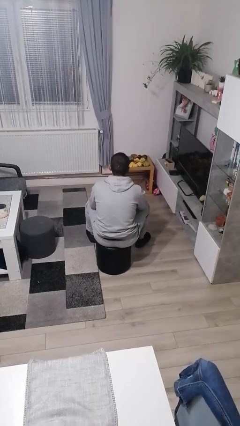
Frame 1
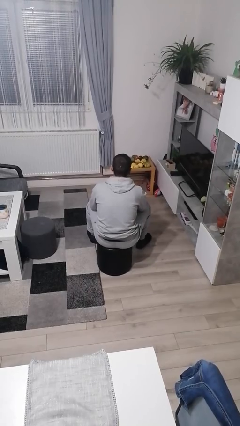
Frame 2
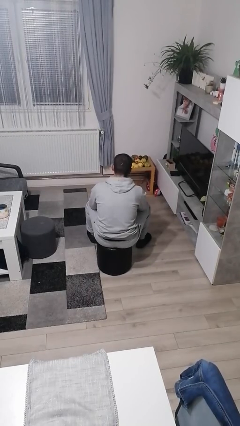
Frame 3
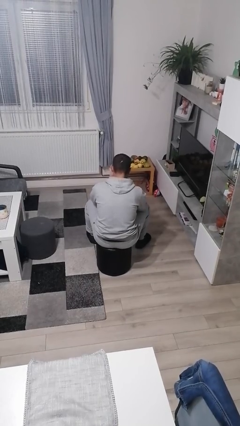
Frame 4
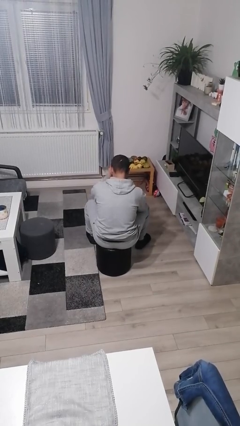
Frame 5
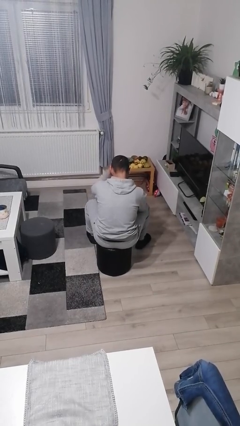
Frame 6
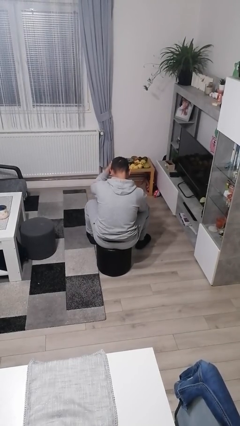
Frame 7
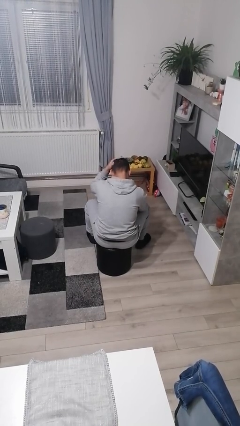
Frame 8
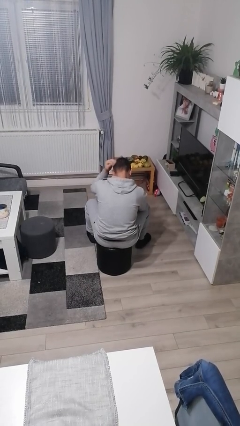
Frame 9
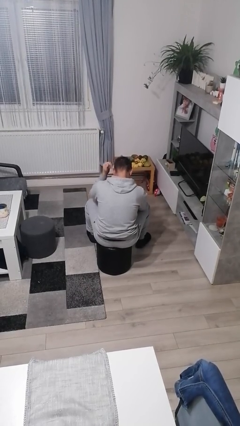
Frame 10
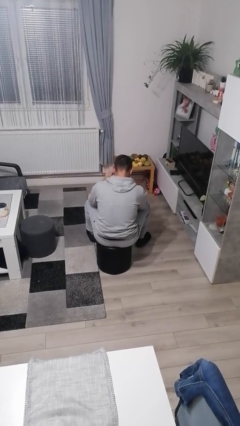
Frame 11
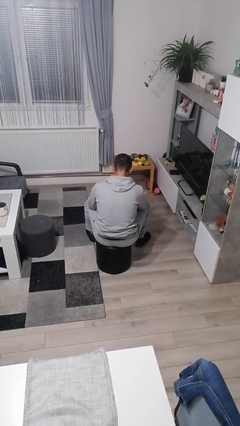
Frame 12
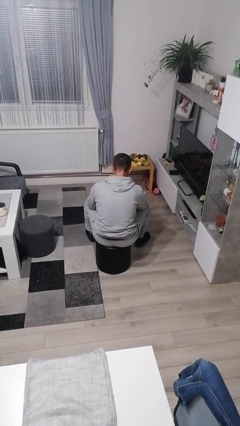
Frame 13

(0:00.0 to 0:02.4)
person strokes hair

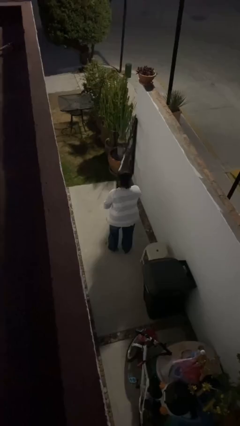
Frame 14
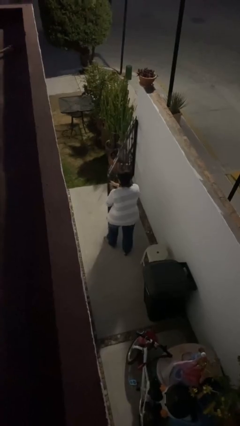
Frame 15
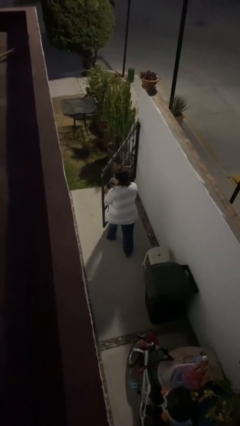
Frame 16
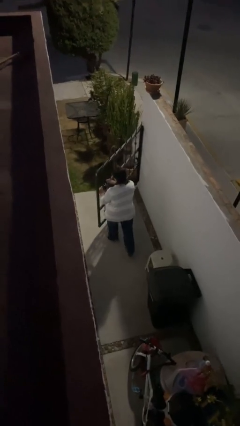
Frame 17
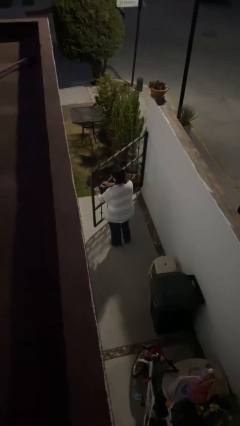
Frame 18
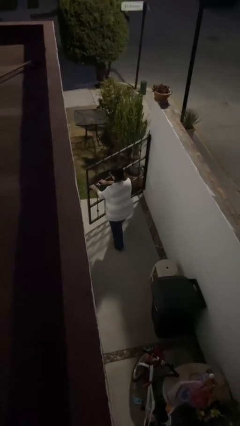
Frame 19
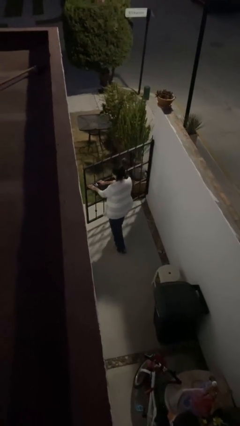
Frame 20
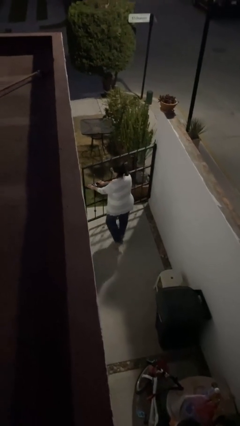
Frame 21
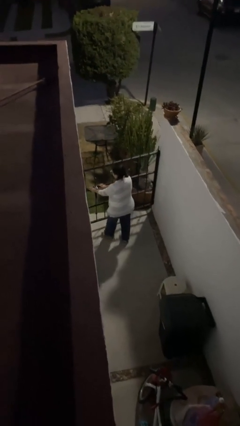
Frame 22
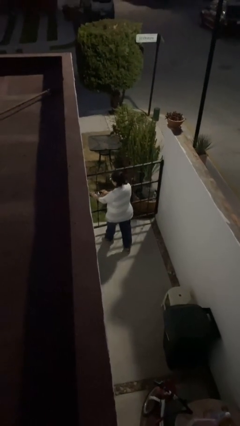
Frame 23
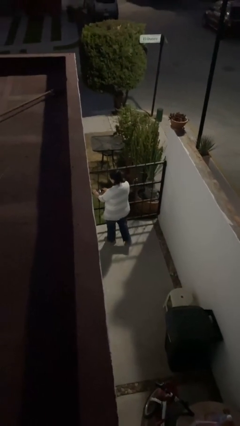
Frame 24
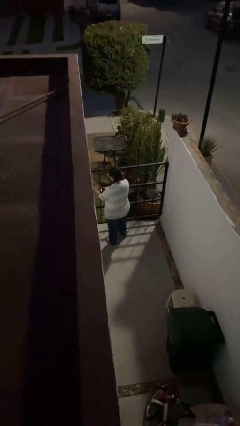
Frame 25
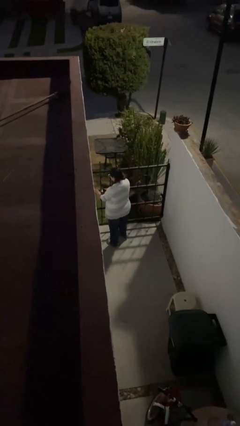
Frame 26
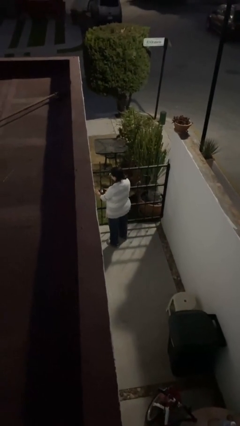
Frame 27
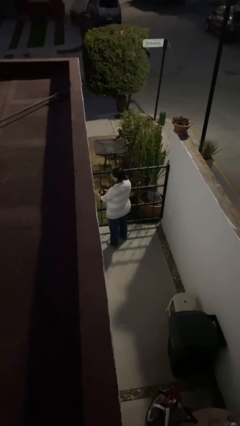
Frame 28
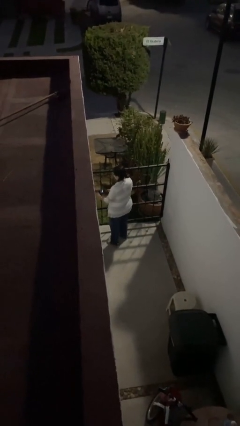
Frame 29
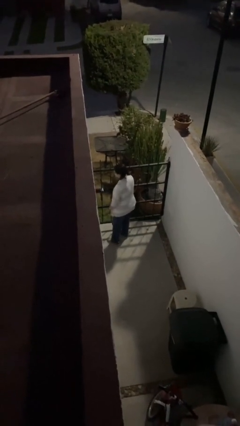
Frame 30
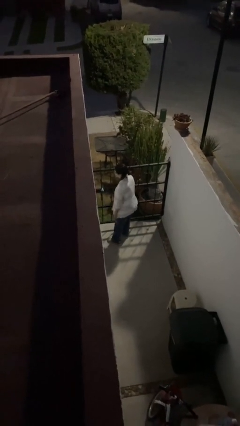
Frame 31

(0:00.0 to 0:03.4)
person closes facility door

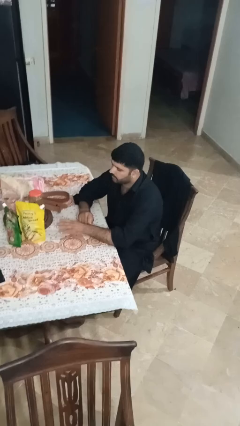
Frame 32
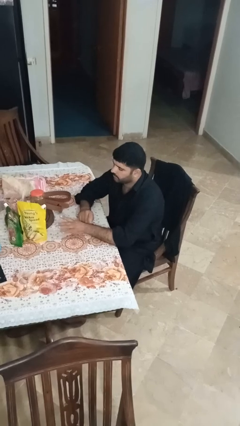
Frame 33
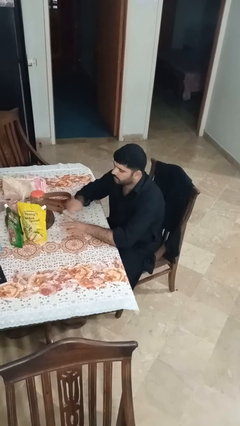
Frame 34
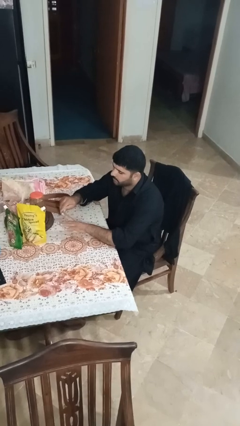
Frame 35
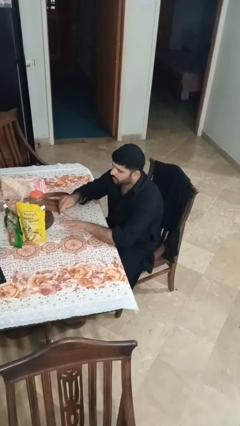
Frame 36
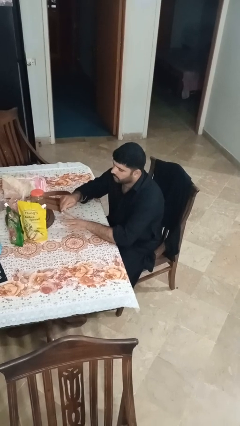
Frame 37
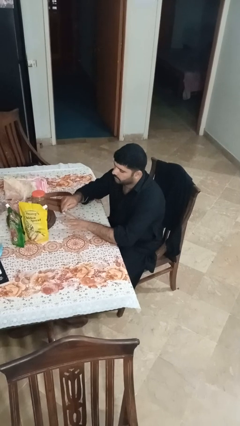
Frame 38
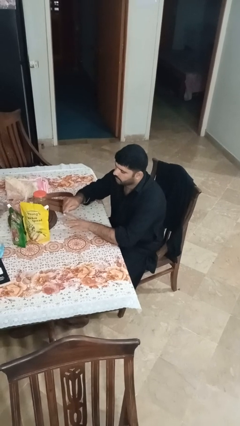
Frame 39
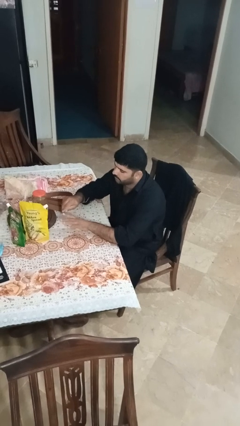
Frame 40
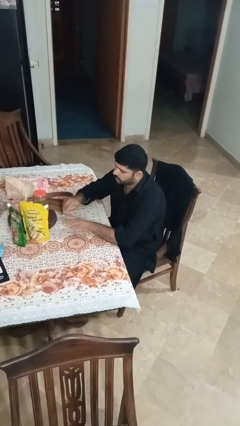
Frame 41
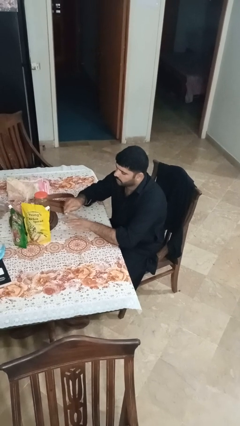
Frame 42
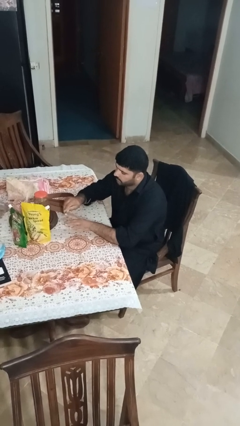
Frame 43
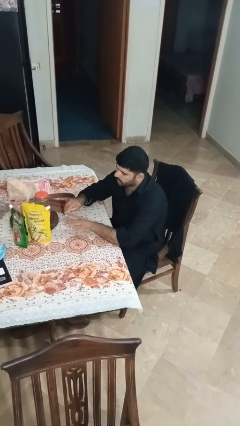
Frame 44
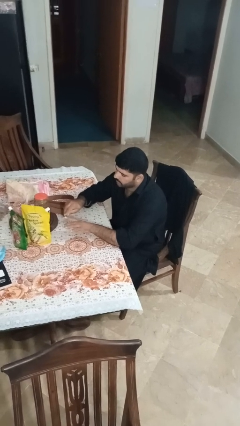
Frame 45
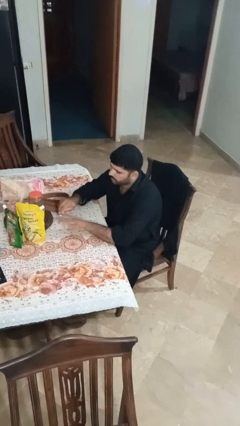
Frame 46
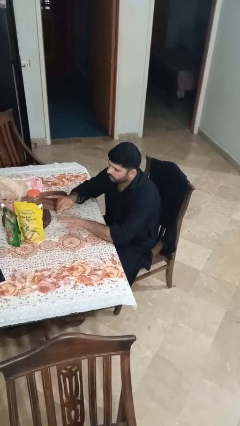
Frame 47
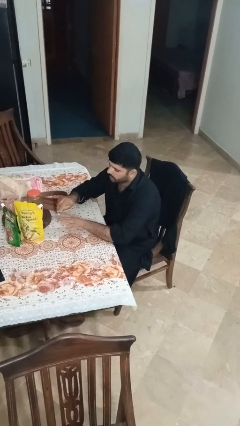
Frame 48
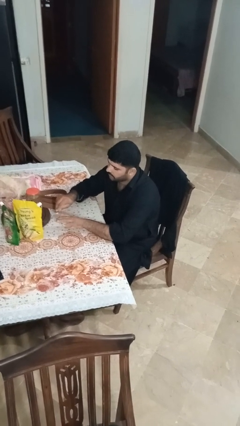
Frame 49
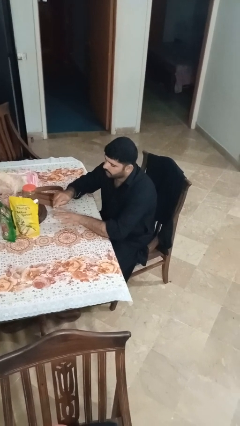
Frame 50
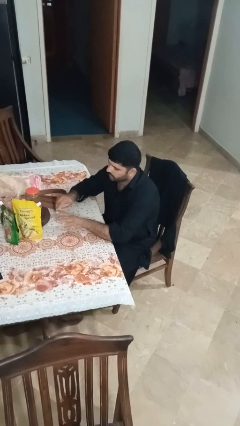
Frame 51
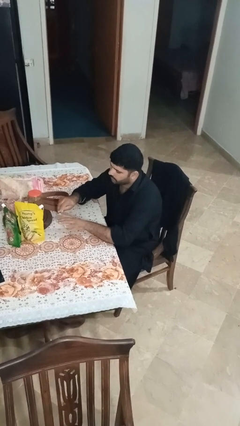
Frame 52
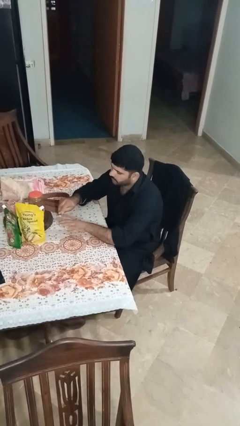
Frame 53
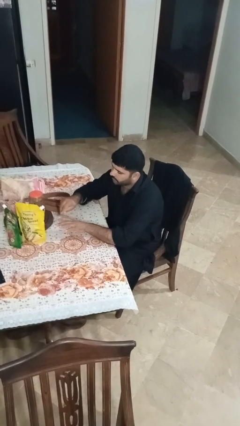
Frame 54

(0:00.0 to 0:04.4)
person files fingernails

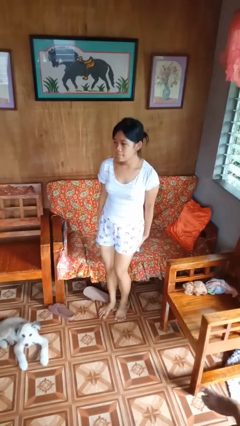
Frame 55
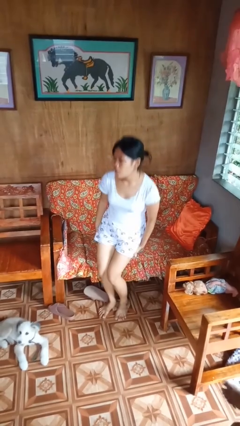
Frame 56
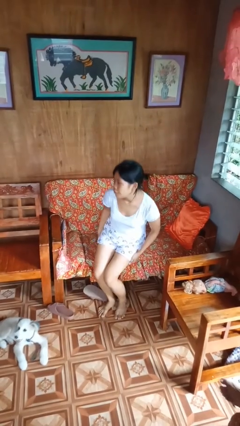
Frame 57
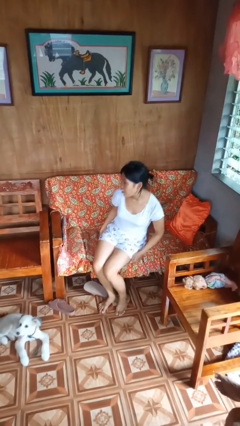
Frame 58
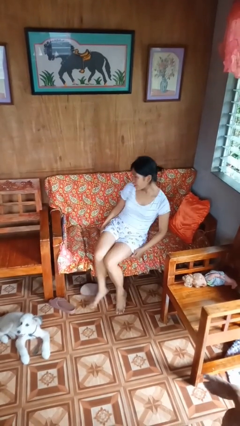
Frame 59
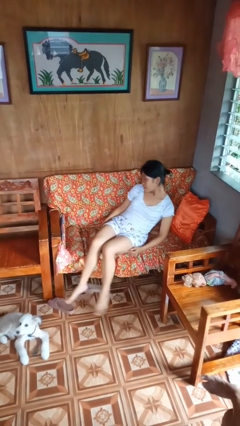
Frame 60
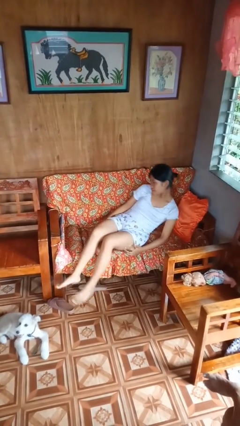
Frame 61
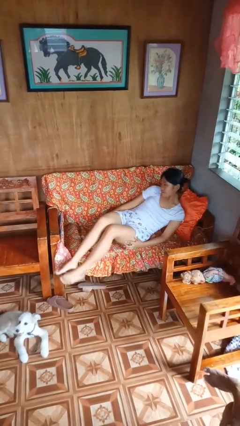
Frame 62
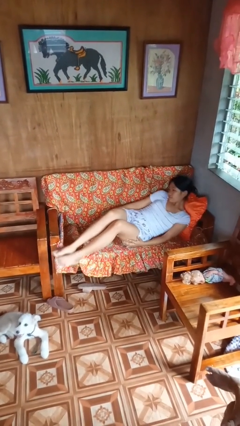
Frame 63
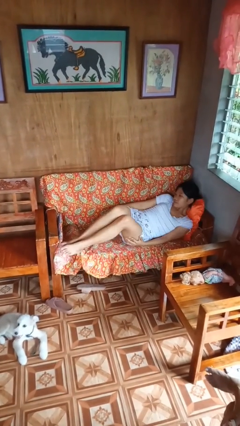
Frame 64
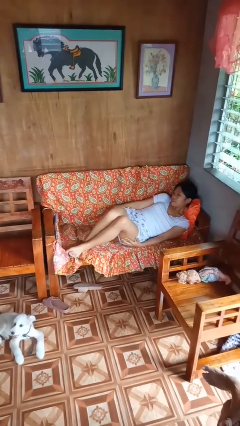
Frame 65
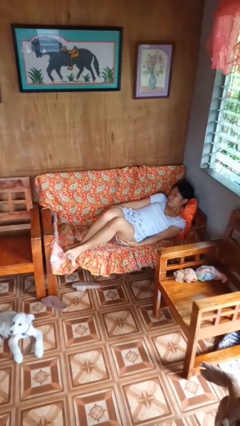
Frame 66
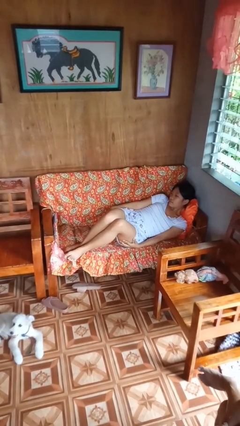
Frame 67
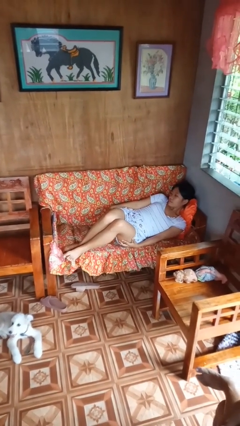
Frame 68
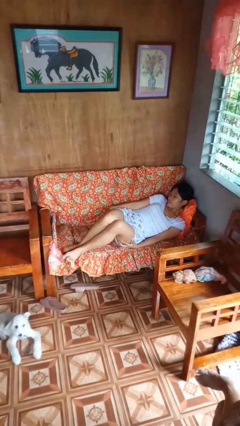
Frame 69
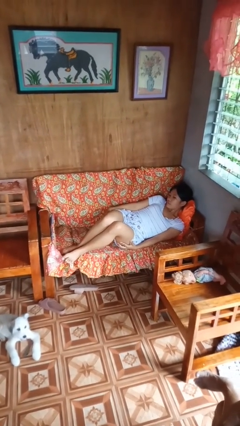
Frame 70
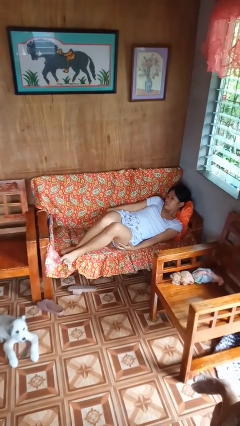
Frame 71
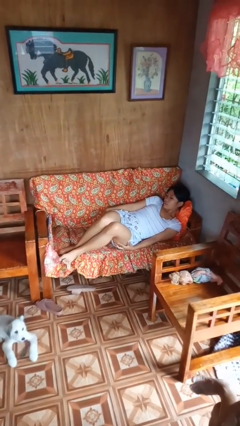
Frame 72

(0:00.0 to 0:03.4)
person lies down on couch

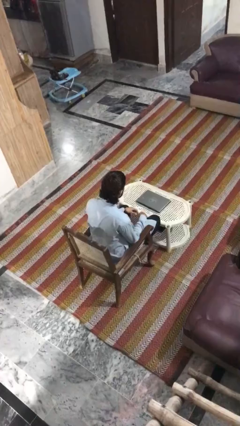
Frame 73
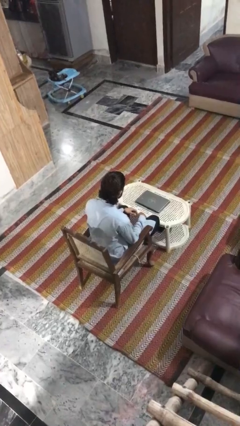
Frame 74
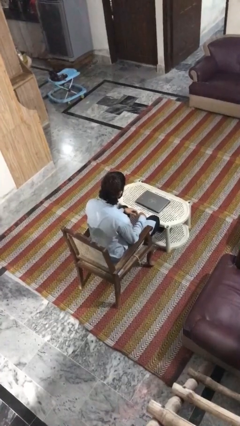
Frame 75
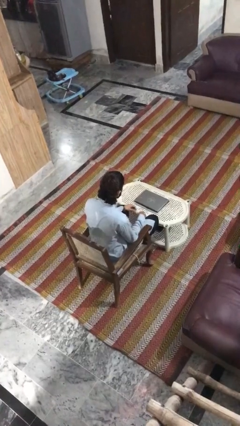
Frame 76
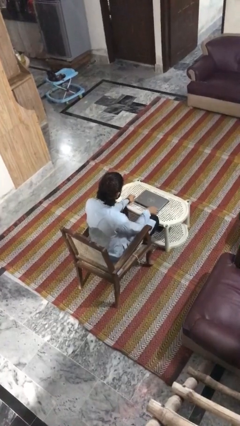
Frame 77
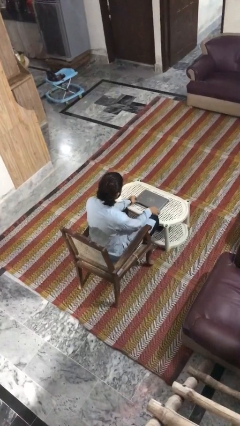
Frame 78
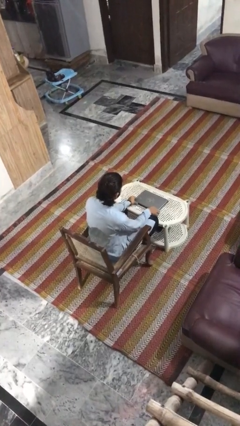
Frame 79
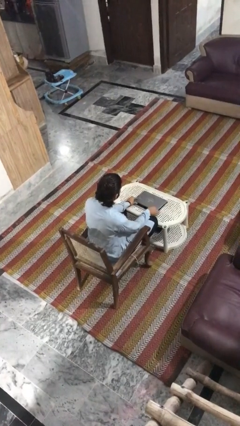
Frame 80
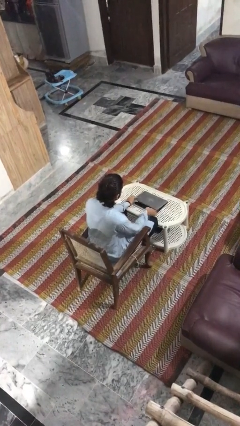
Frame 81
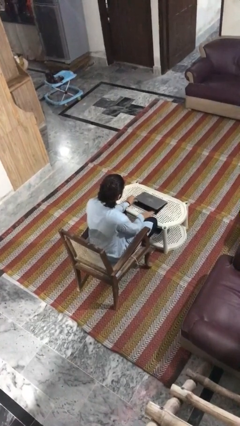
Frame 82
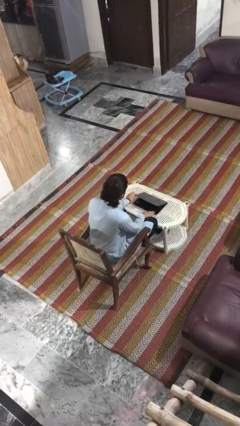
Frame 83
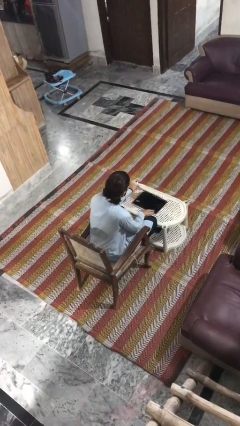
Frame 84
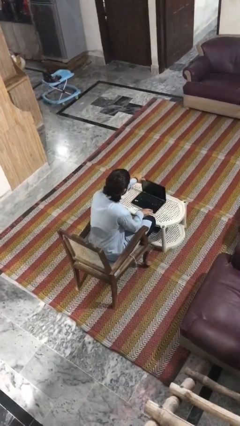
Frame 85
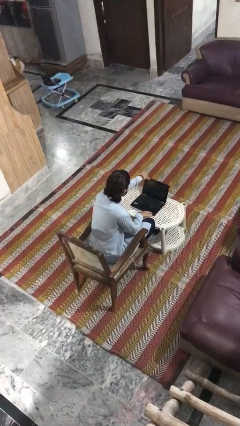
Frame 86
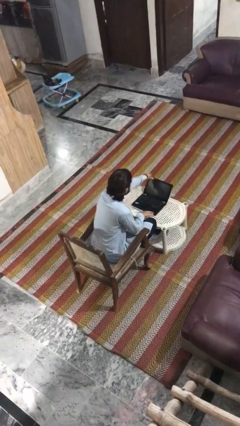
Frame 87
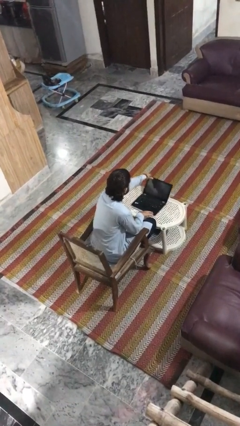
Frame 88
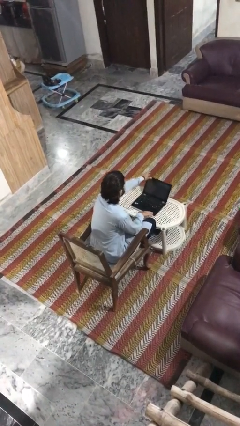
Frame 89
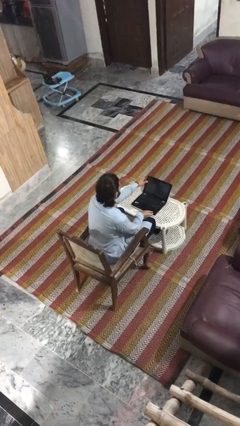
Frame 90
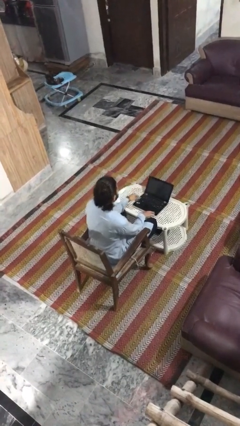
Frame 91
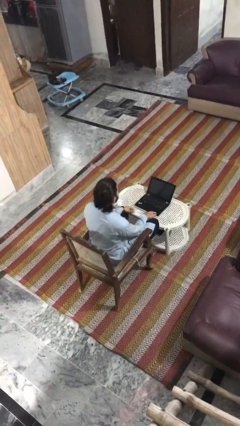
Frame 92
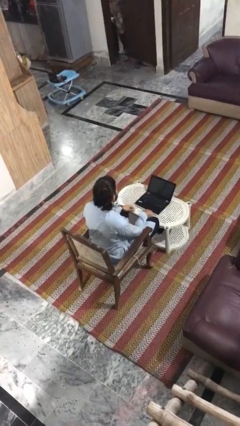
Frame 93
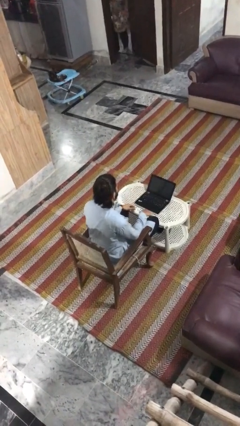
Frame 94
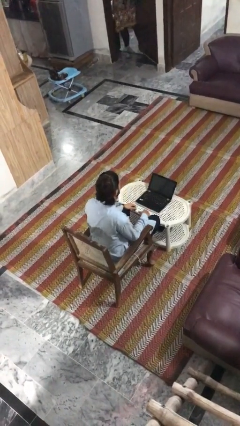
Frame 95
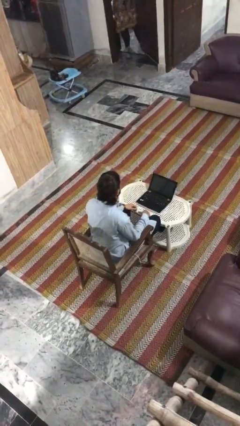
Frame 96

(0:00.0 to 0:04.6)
person opens laptop
